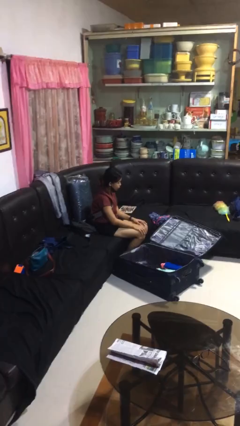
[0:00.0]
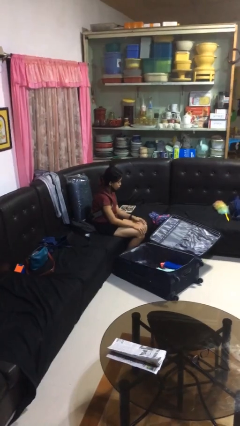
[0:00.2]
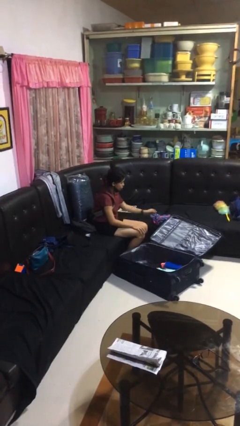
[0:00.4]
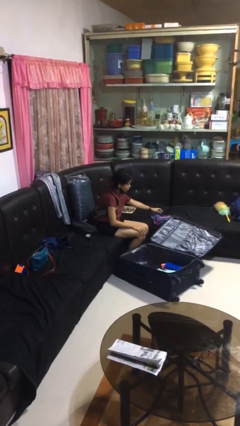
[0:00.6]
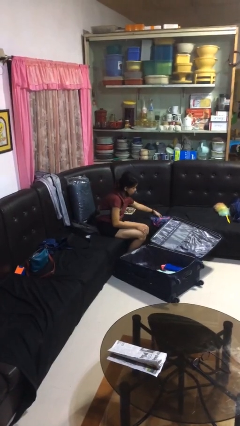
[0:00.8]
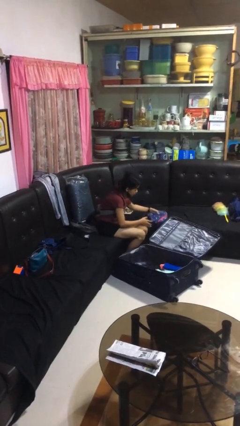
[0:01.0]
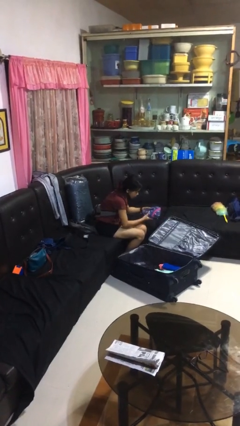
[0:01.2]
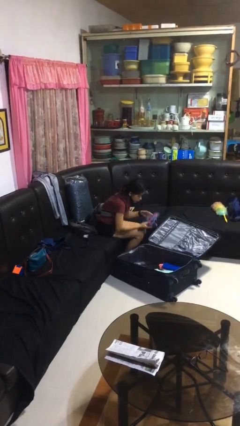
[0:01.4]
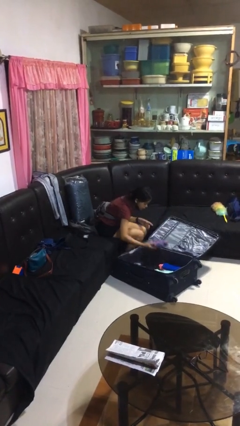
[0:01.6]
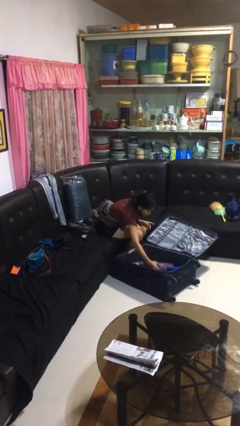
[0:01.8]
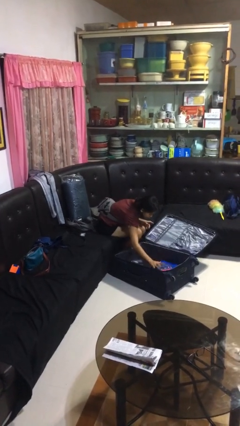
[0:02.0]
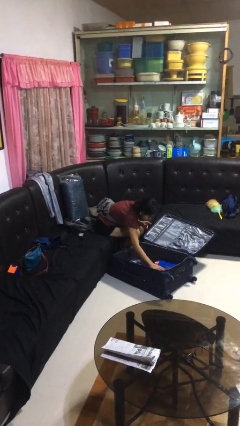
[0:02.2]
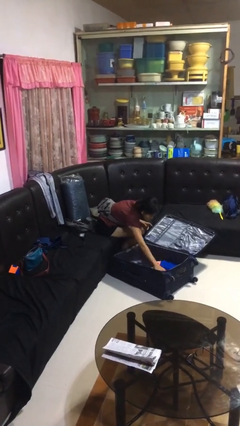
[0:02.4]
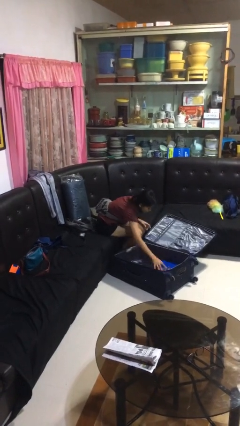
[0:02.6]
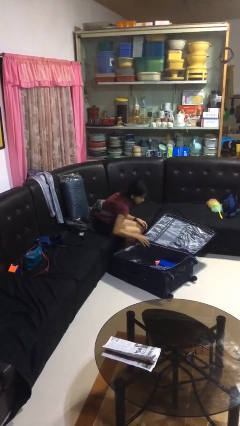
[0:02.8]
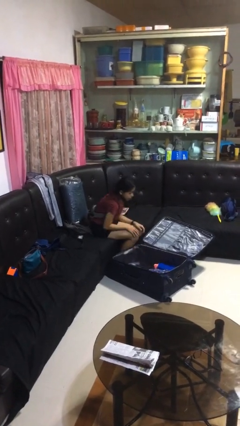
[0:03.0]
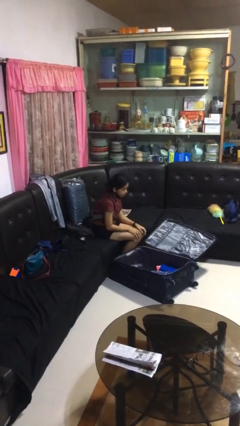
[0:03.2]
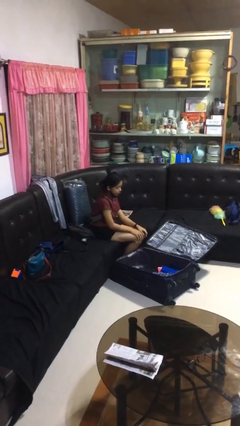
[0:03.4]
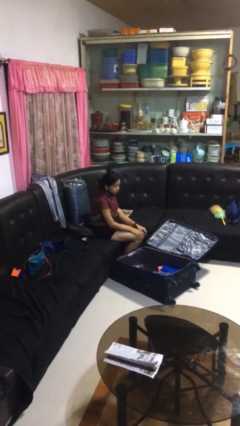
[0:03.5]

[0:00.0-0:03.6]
person loads clothes into suitcase

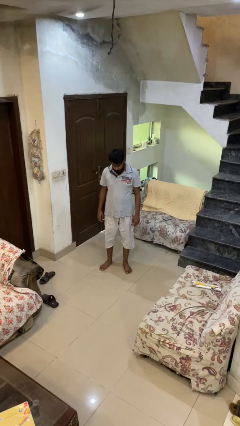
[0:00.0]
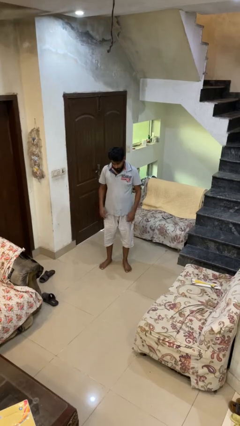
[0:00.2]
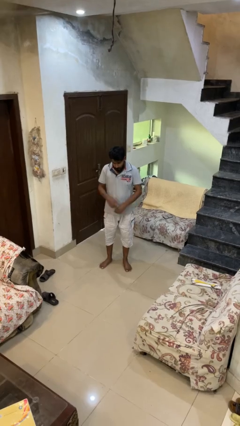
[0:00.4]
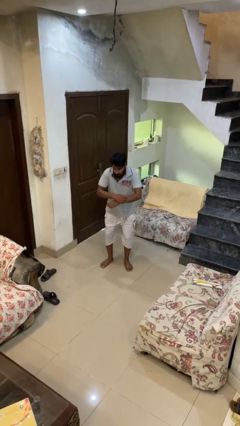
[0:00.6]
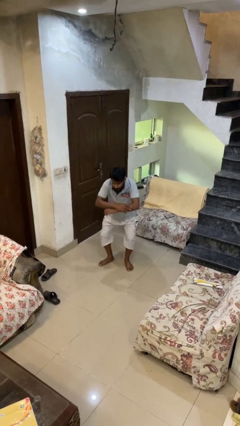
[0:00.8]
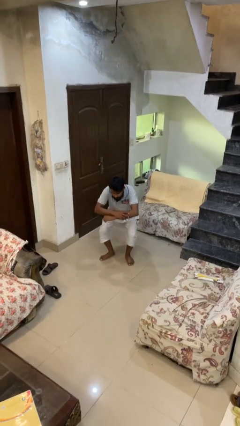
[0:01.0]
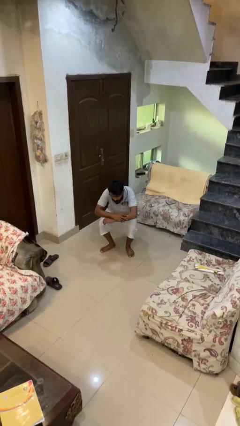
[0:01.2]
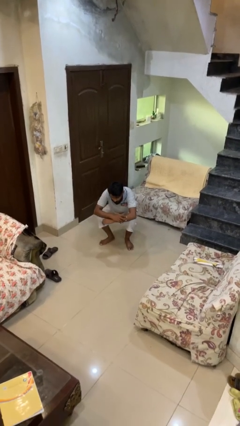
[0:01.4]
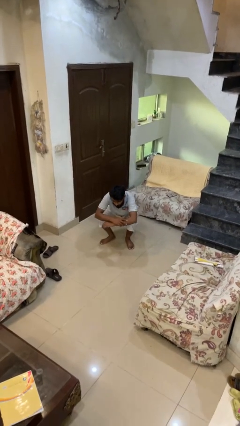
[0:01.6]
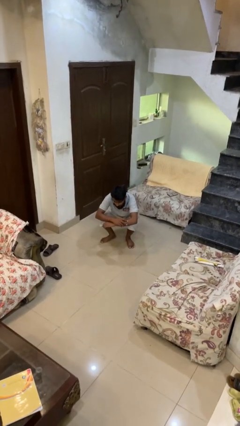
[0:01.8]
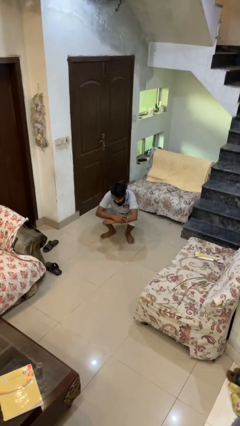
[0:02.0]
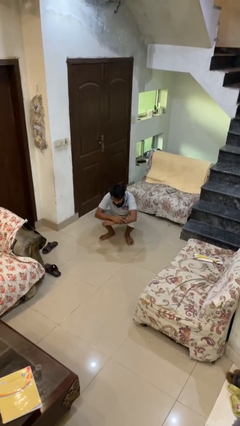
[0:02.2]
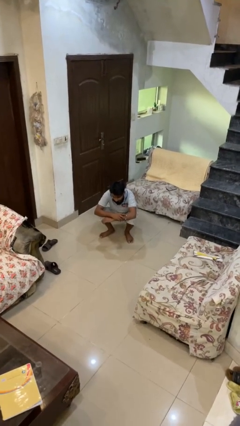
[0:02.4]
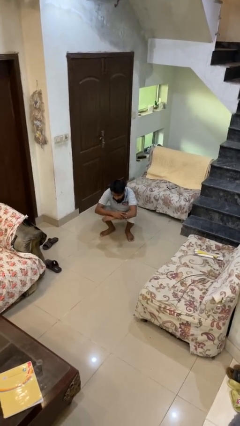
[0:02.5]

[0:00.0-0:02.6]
person squats

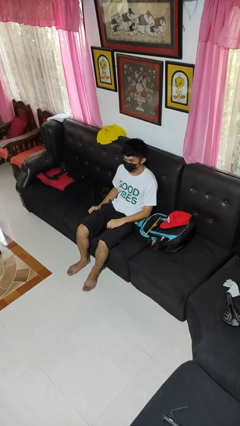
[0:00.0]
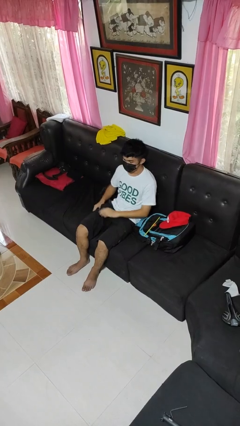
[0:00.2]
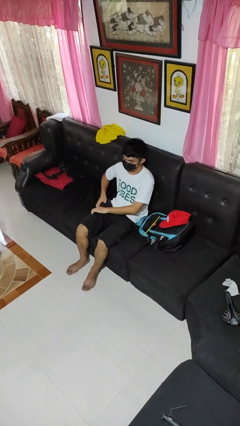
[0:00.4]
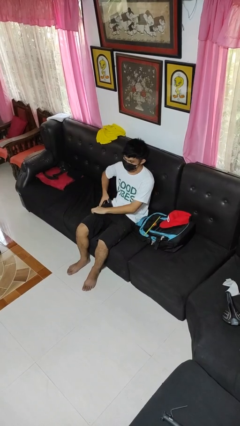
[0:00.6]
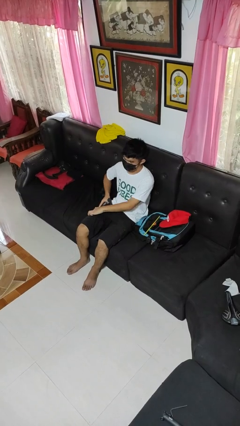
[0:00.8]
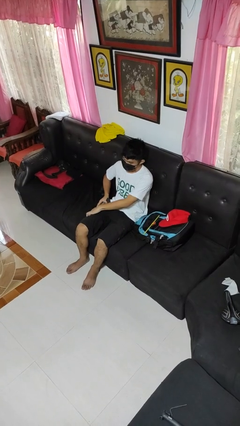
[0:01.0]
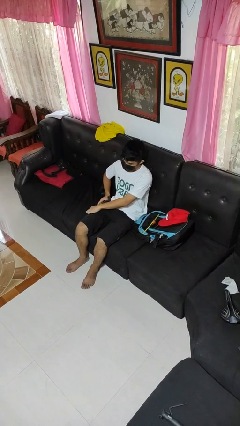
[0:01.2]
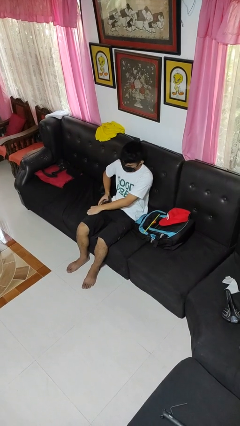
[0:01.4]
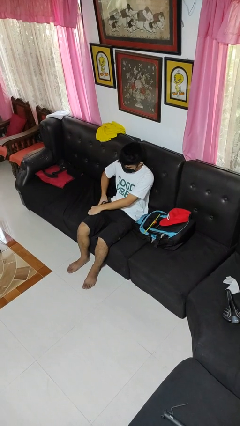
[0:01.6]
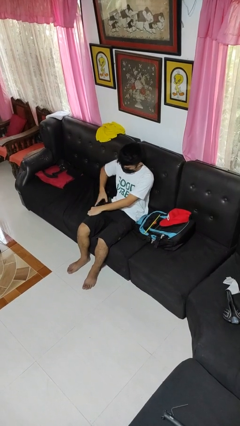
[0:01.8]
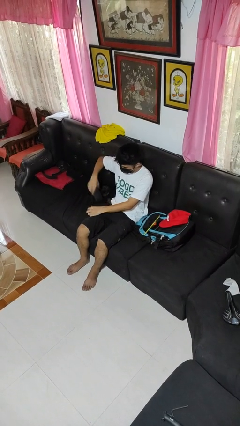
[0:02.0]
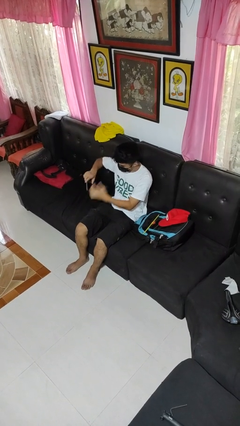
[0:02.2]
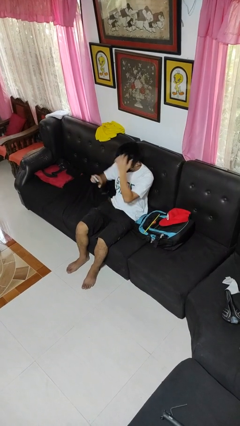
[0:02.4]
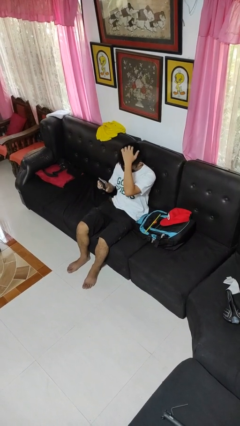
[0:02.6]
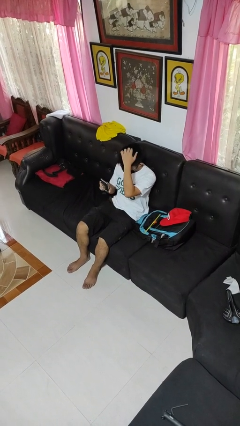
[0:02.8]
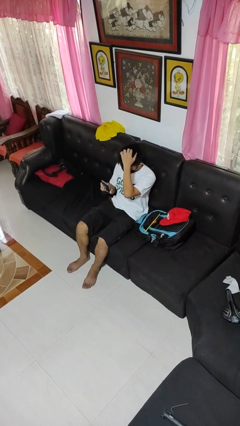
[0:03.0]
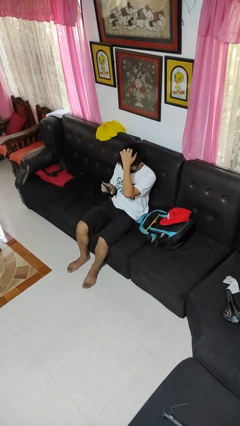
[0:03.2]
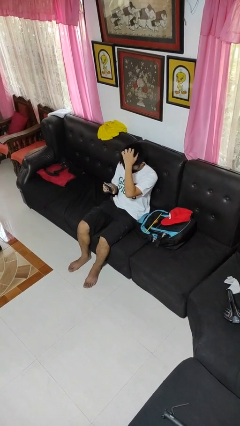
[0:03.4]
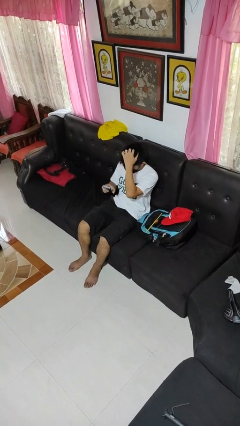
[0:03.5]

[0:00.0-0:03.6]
person takes phone from pocket

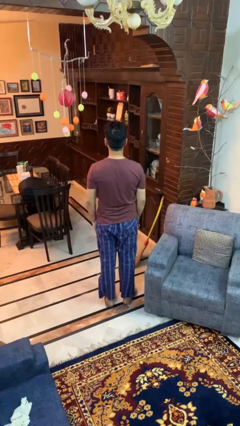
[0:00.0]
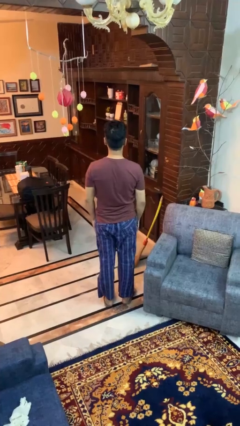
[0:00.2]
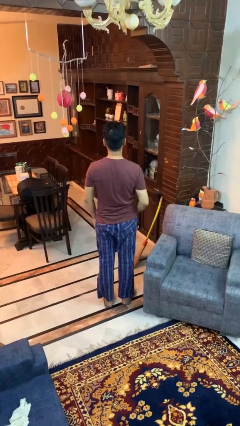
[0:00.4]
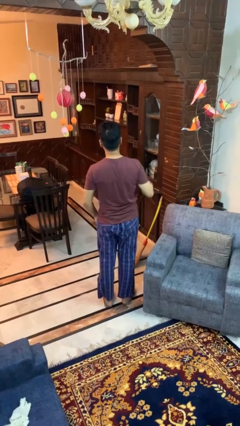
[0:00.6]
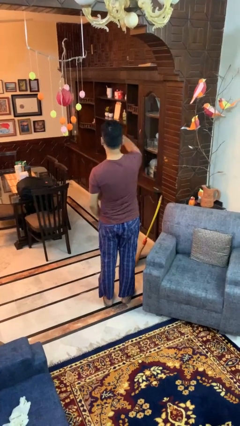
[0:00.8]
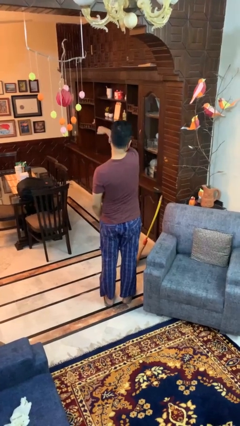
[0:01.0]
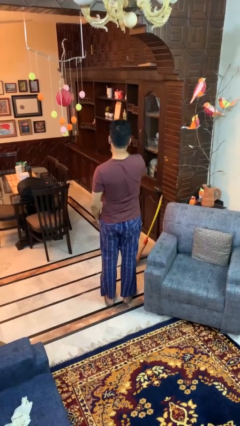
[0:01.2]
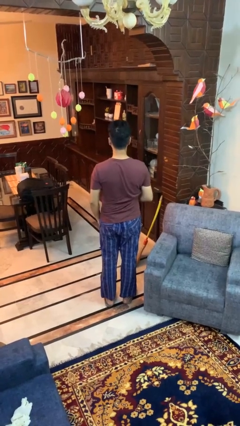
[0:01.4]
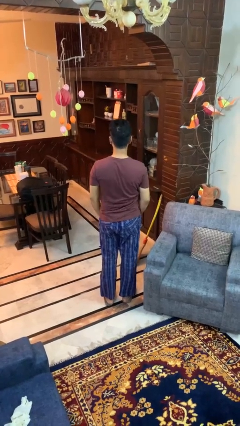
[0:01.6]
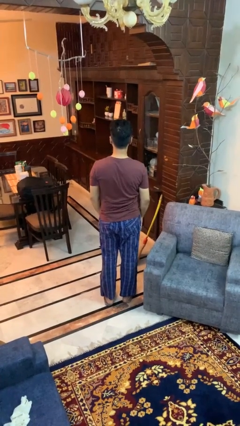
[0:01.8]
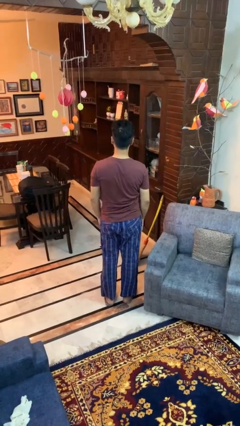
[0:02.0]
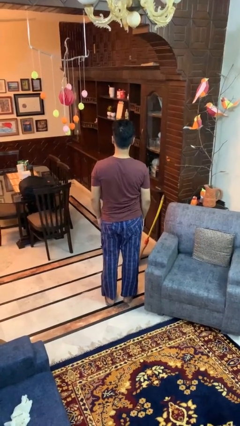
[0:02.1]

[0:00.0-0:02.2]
person karate chop

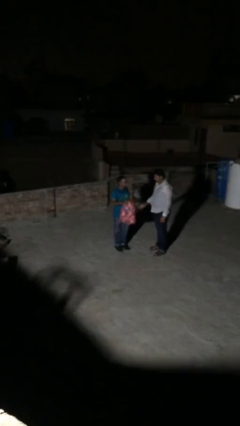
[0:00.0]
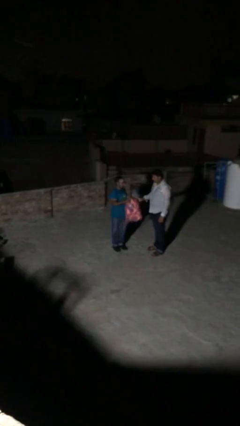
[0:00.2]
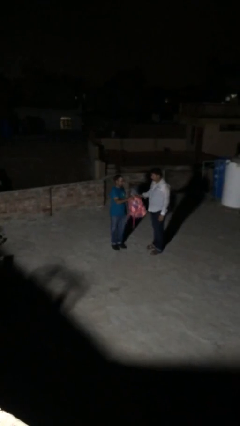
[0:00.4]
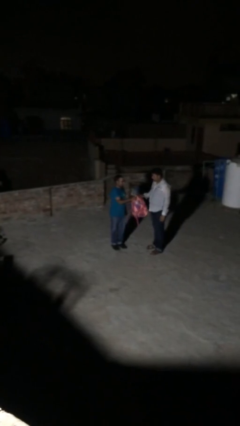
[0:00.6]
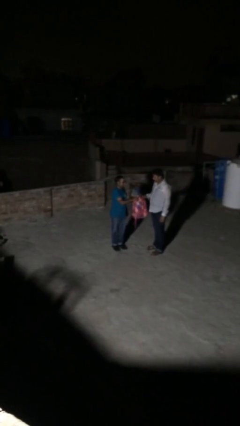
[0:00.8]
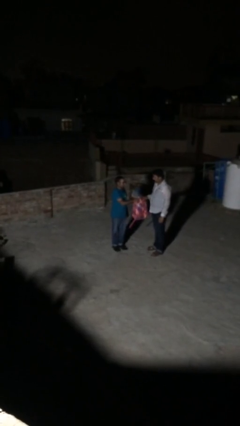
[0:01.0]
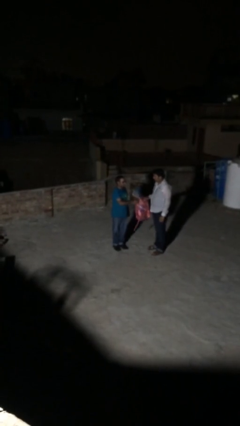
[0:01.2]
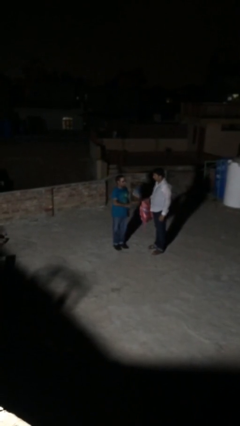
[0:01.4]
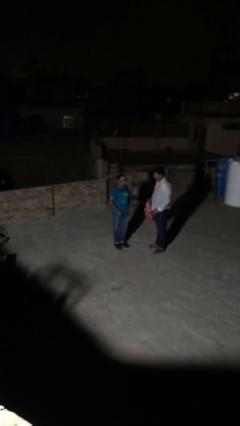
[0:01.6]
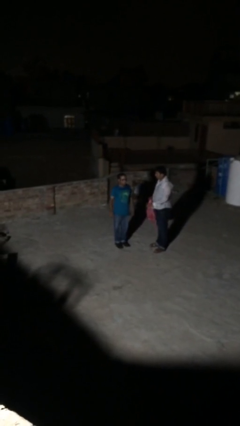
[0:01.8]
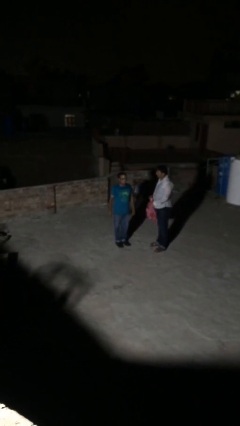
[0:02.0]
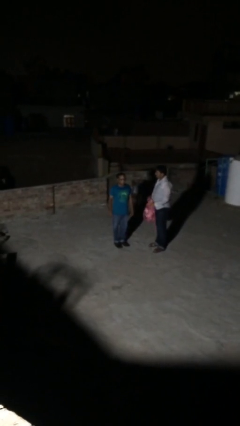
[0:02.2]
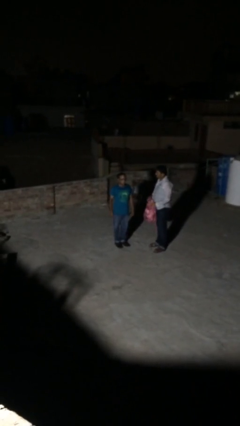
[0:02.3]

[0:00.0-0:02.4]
person transfers object to person

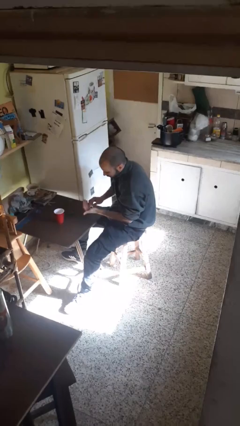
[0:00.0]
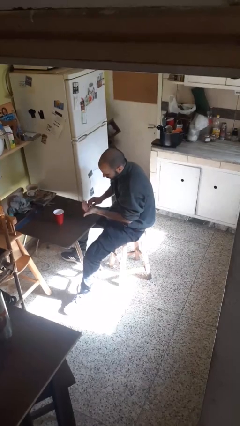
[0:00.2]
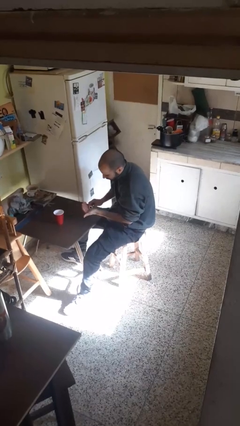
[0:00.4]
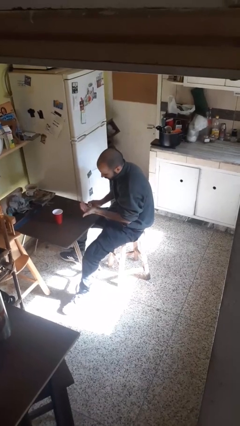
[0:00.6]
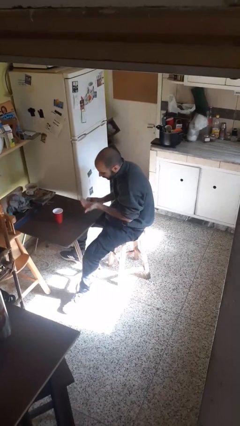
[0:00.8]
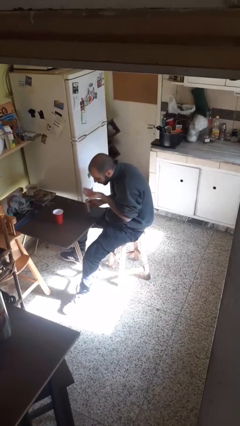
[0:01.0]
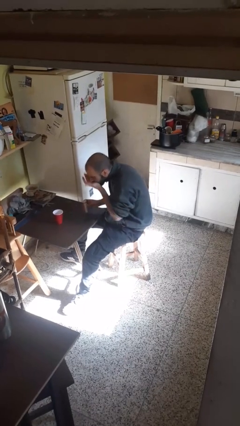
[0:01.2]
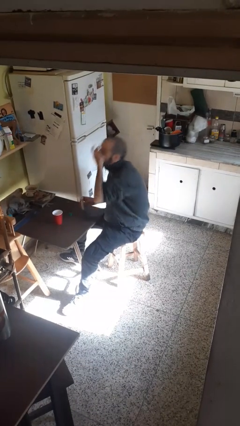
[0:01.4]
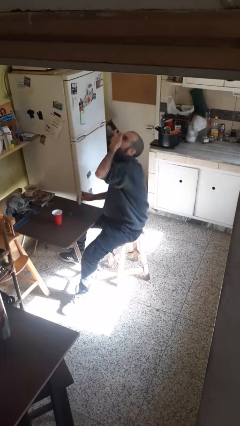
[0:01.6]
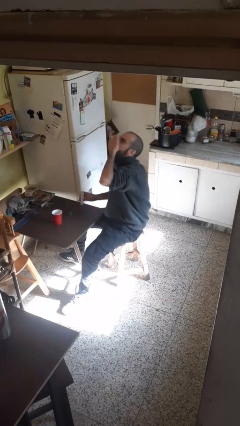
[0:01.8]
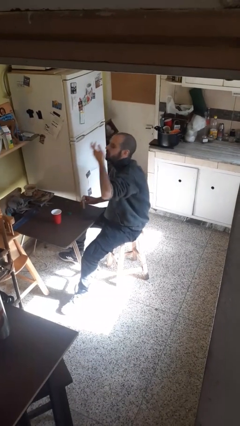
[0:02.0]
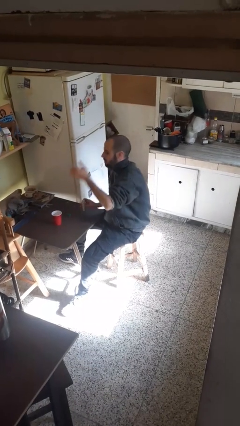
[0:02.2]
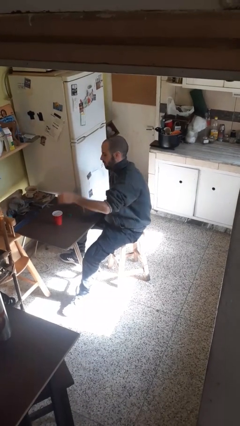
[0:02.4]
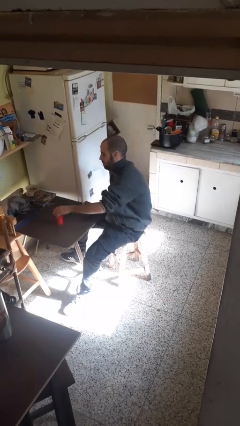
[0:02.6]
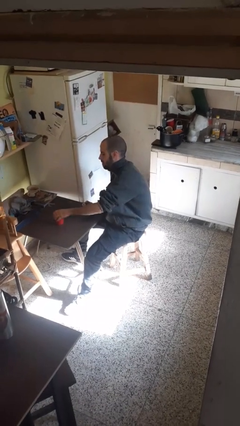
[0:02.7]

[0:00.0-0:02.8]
person takes medicine pills

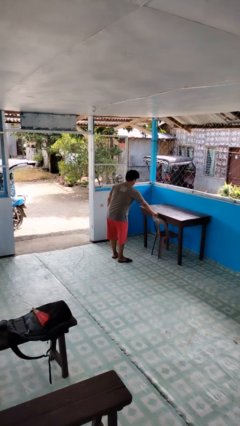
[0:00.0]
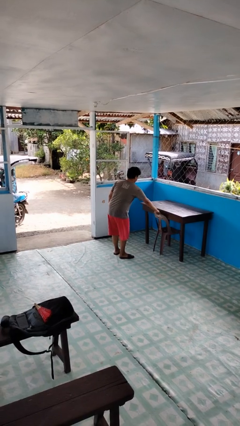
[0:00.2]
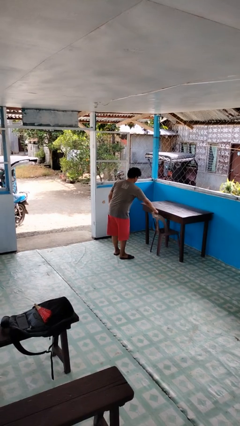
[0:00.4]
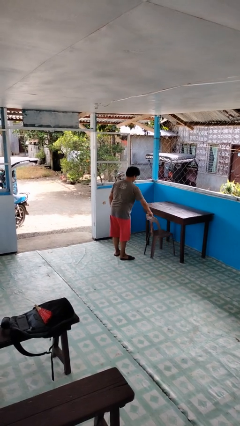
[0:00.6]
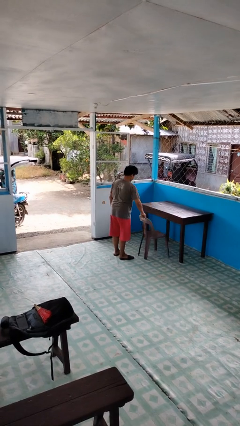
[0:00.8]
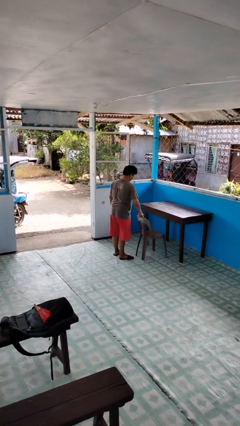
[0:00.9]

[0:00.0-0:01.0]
person pulls out chair
